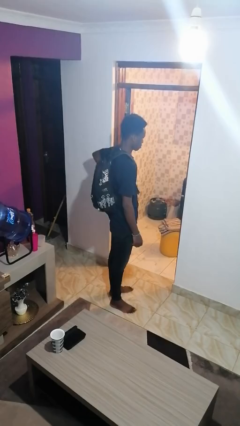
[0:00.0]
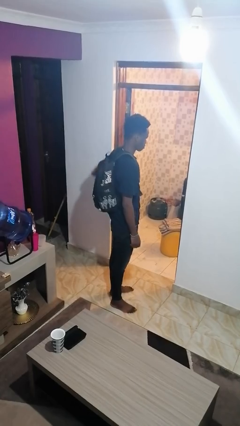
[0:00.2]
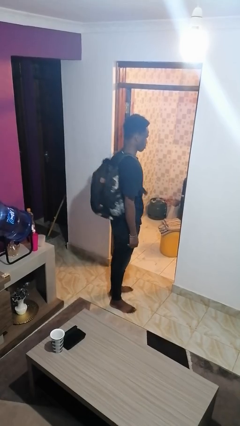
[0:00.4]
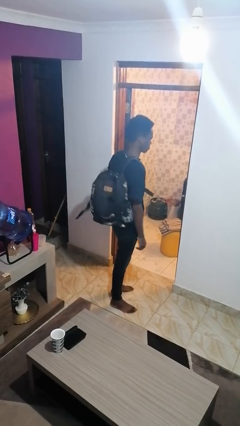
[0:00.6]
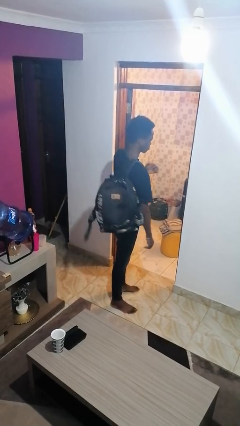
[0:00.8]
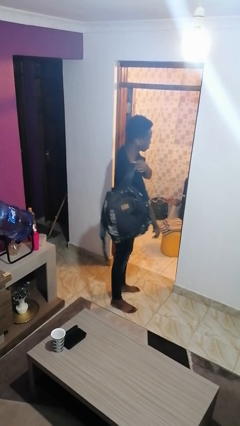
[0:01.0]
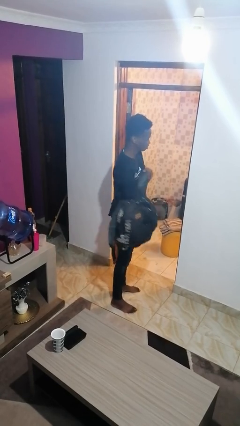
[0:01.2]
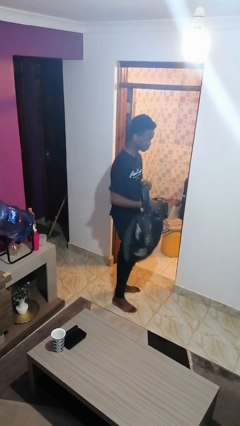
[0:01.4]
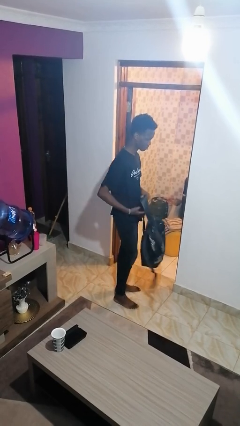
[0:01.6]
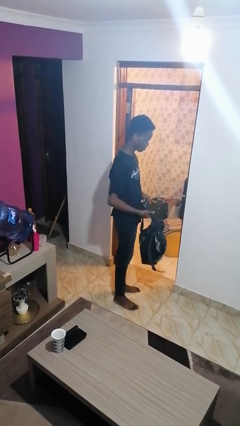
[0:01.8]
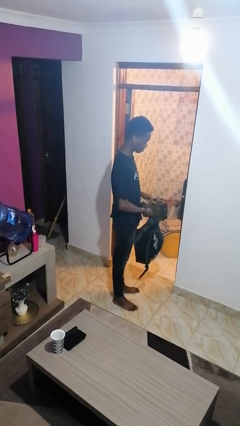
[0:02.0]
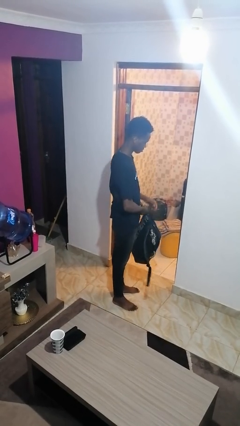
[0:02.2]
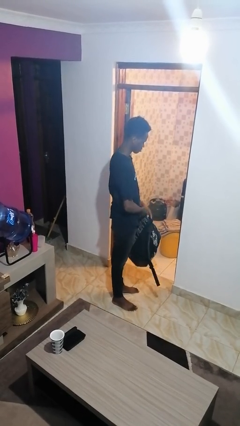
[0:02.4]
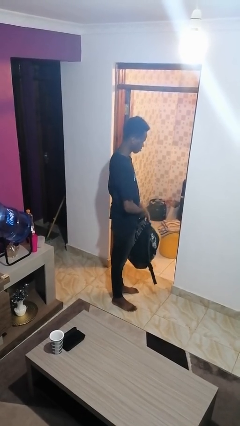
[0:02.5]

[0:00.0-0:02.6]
person takes off backpack

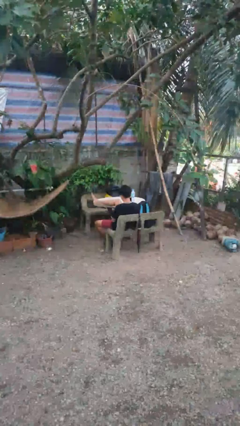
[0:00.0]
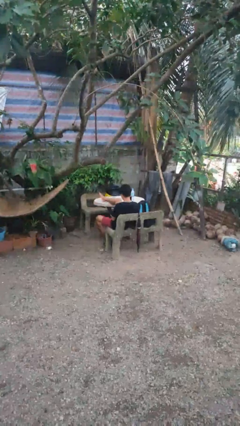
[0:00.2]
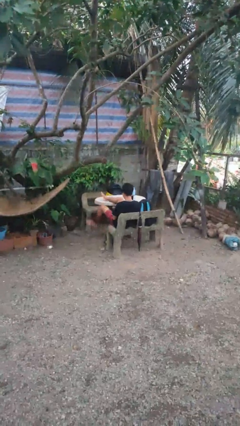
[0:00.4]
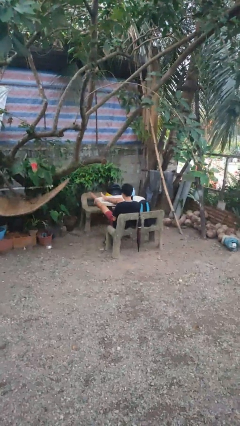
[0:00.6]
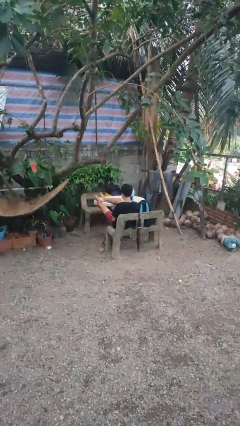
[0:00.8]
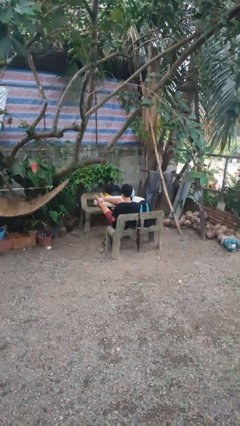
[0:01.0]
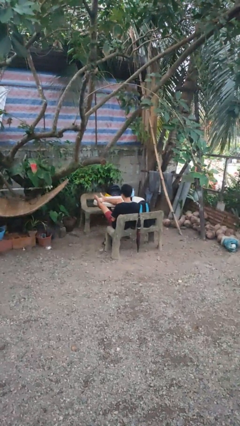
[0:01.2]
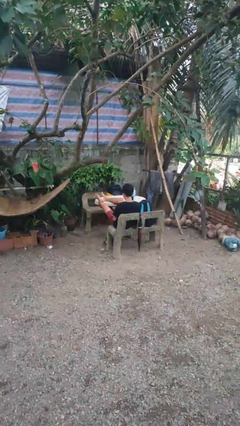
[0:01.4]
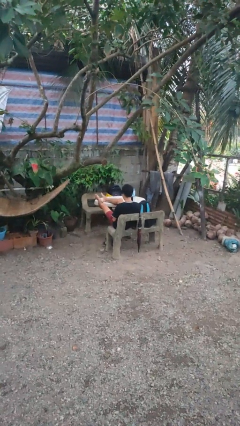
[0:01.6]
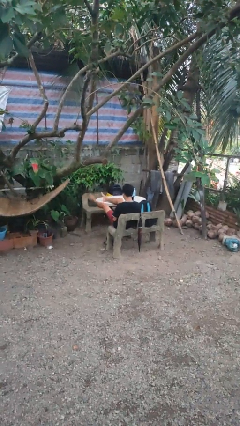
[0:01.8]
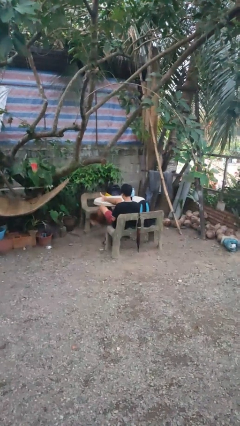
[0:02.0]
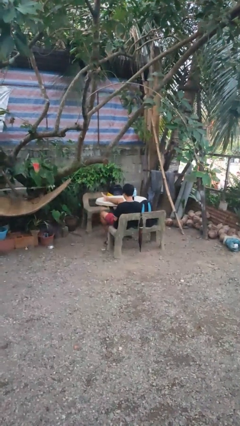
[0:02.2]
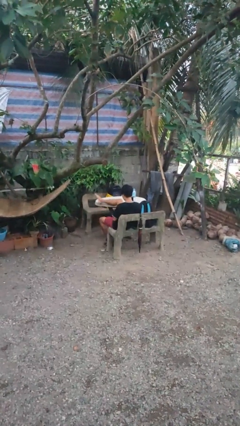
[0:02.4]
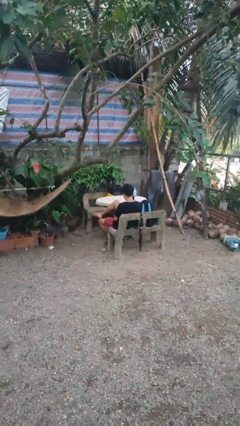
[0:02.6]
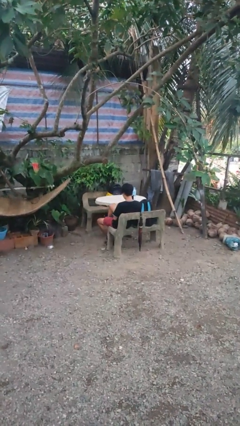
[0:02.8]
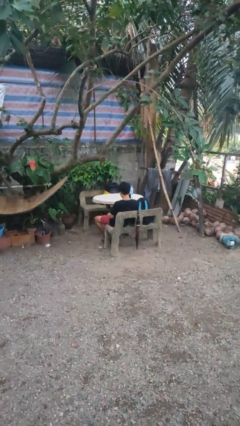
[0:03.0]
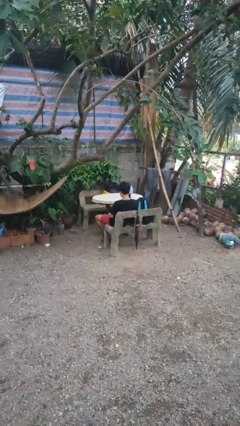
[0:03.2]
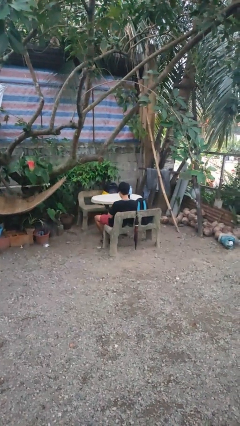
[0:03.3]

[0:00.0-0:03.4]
person puts feet up

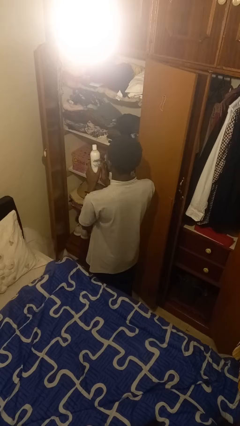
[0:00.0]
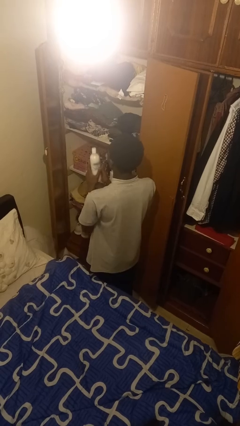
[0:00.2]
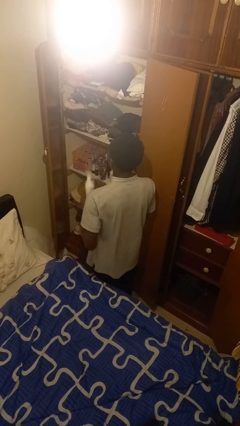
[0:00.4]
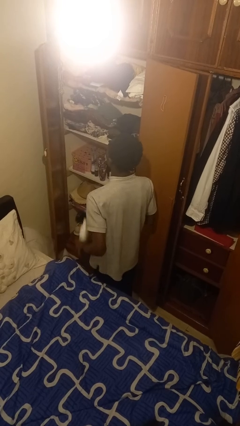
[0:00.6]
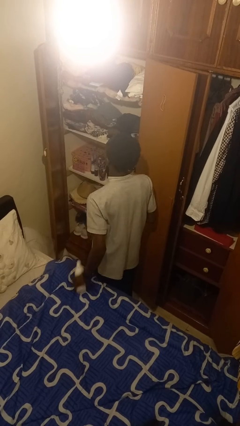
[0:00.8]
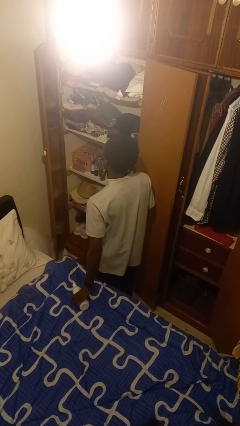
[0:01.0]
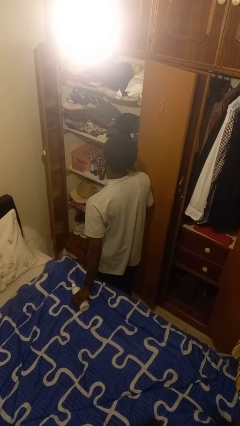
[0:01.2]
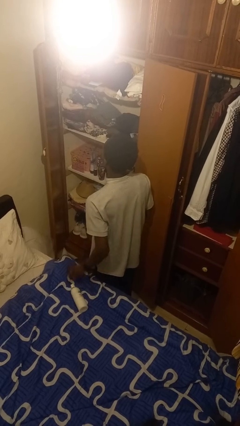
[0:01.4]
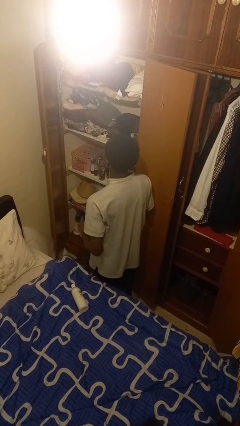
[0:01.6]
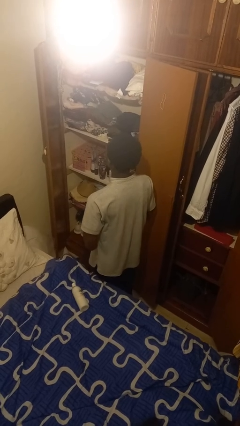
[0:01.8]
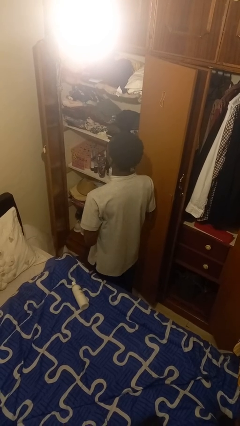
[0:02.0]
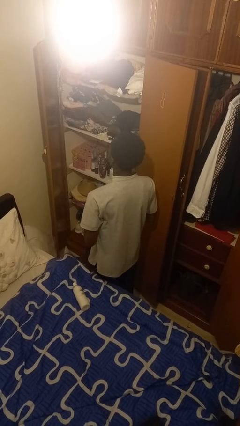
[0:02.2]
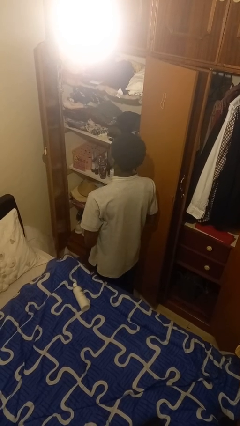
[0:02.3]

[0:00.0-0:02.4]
person puts down object on bed

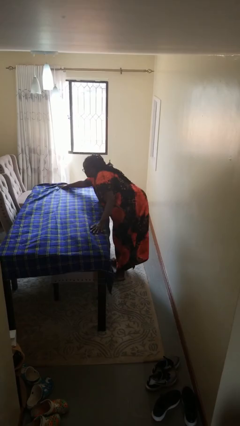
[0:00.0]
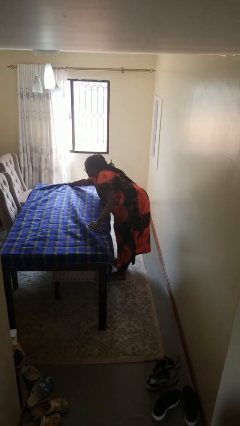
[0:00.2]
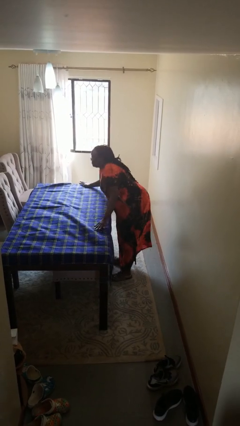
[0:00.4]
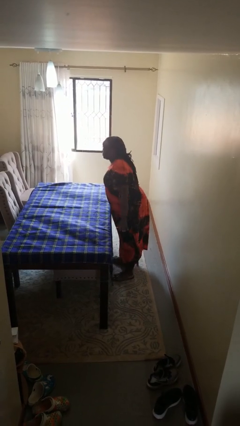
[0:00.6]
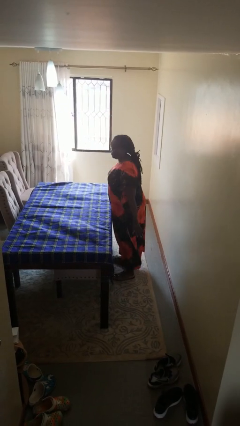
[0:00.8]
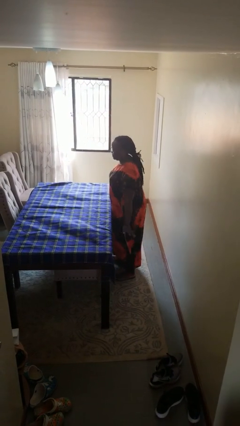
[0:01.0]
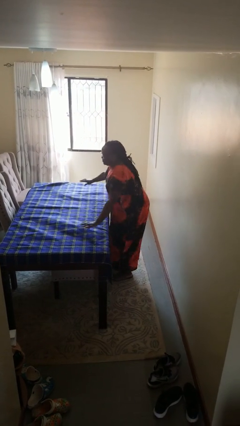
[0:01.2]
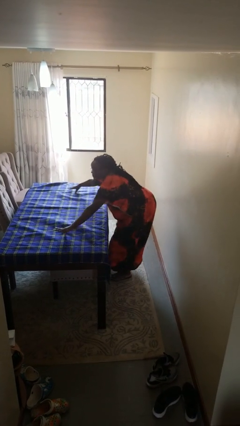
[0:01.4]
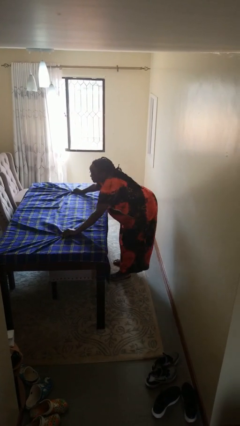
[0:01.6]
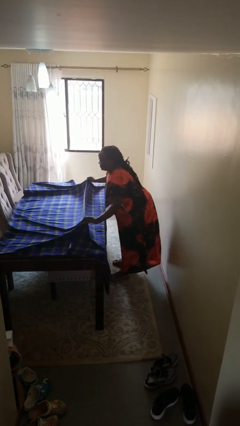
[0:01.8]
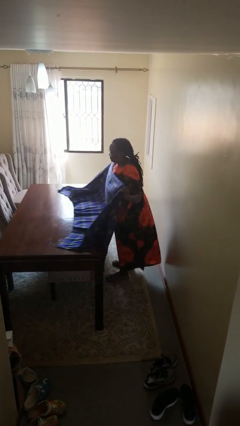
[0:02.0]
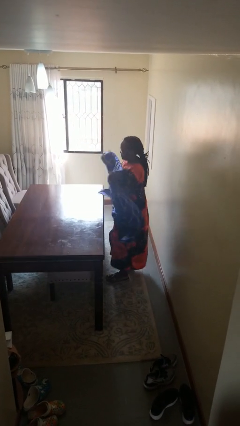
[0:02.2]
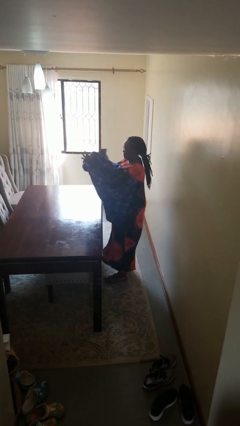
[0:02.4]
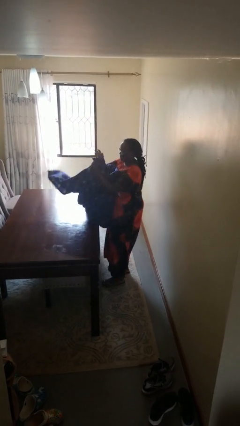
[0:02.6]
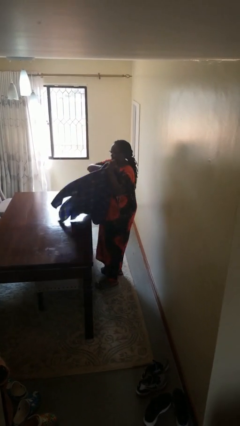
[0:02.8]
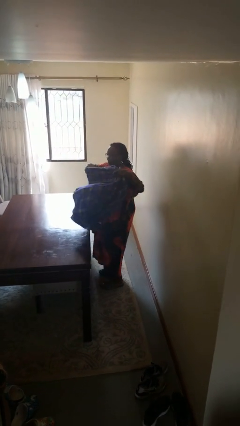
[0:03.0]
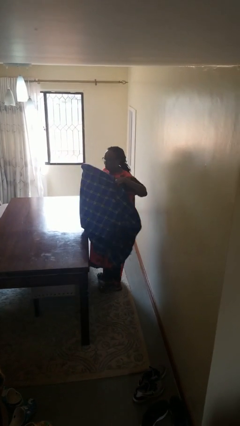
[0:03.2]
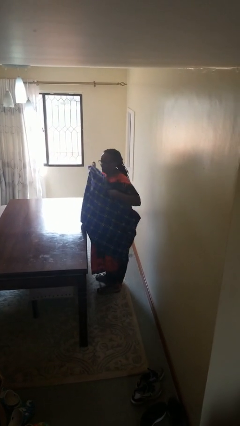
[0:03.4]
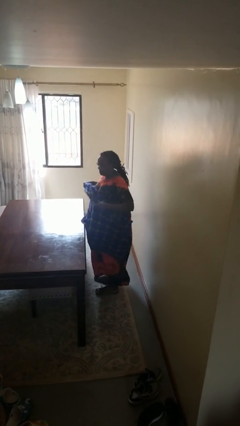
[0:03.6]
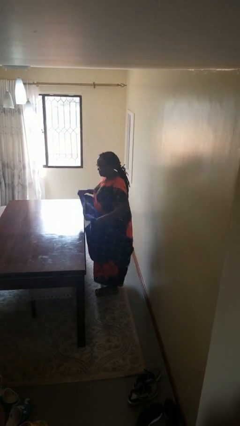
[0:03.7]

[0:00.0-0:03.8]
person folds tablecloth

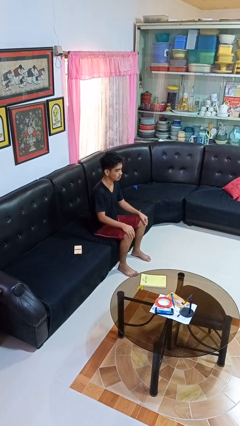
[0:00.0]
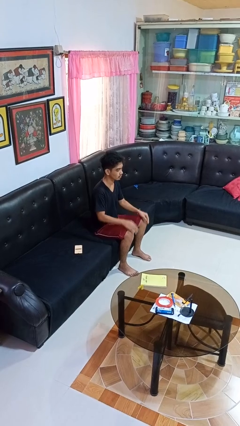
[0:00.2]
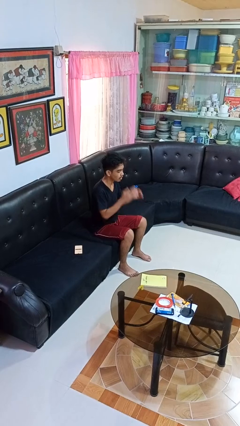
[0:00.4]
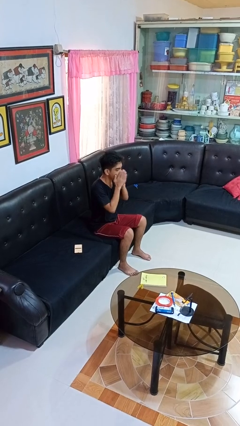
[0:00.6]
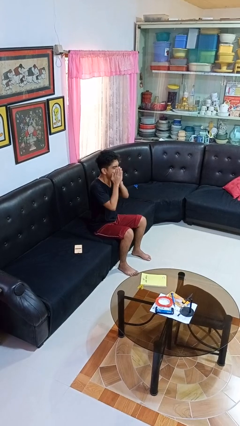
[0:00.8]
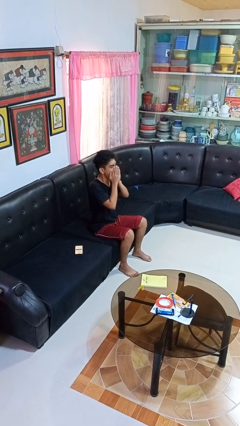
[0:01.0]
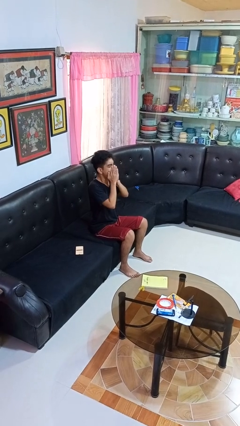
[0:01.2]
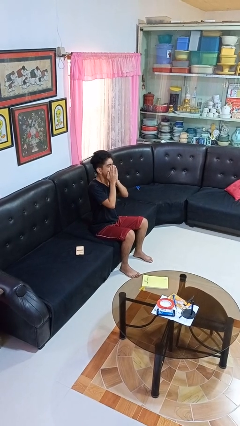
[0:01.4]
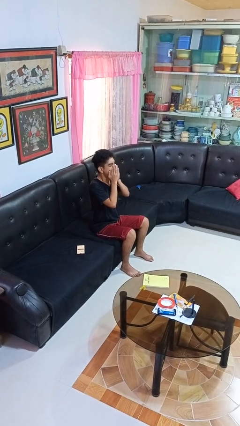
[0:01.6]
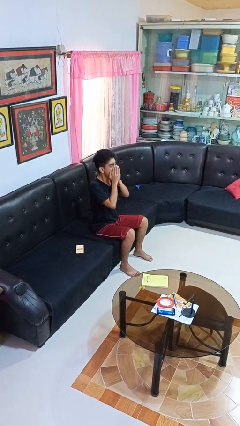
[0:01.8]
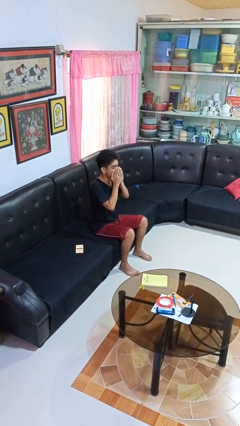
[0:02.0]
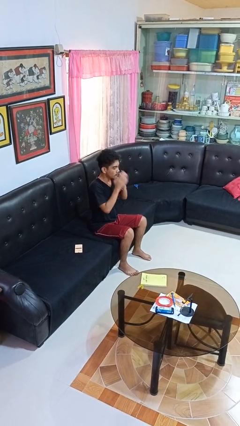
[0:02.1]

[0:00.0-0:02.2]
person yawns

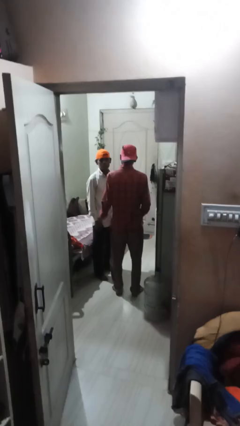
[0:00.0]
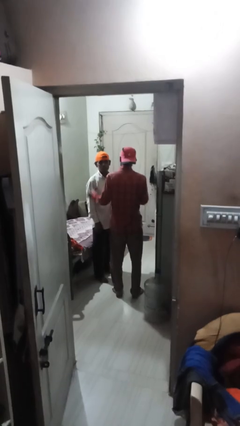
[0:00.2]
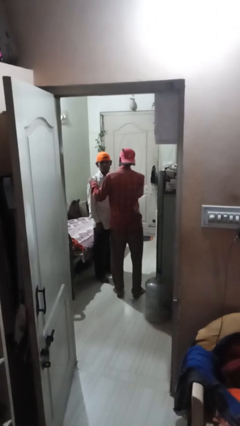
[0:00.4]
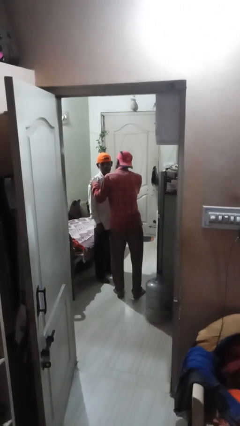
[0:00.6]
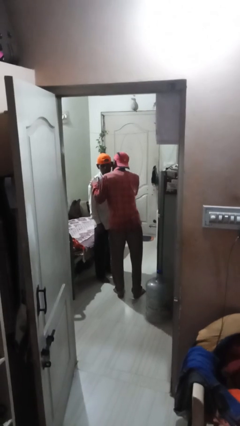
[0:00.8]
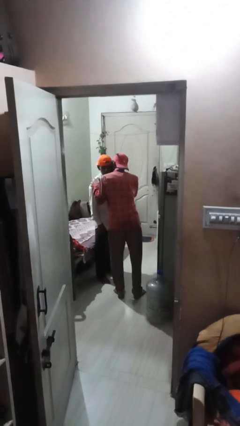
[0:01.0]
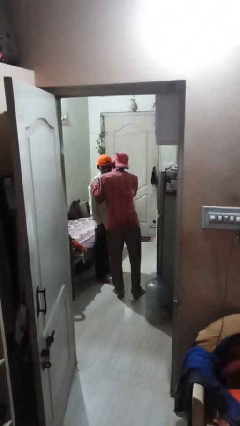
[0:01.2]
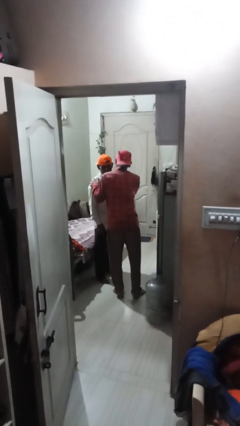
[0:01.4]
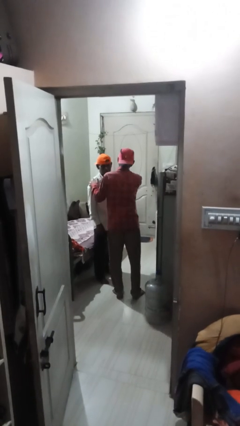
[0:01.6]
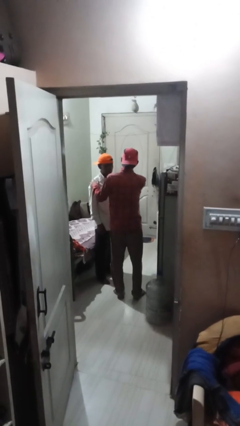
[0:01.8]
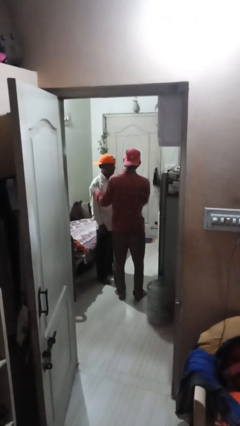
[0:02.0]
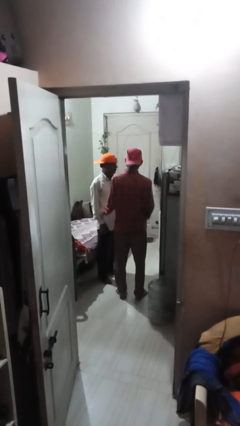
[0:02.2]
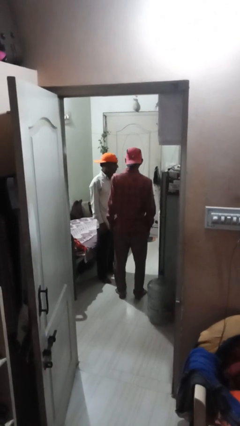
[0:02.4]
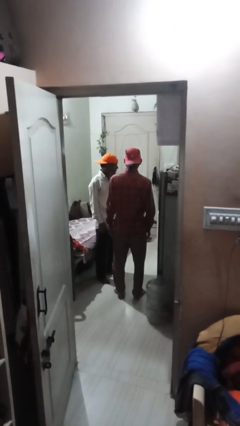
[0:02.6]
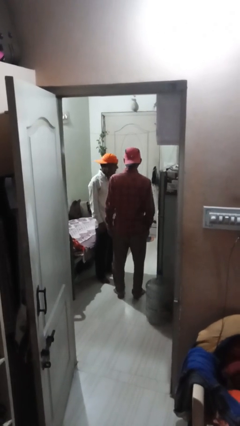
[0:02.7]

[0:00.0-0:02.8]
person kisses cheek of person

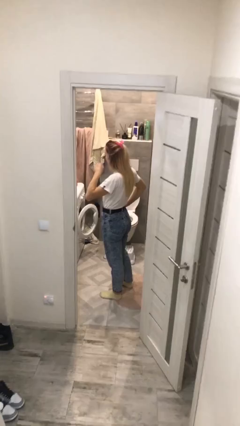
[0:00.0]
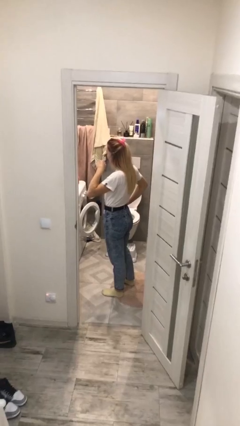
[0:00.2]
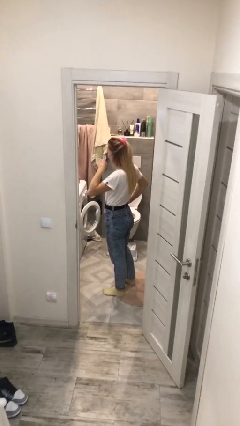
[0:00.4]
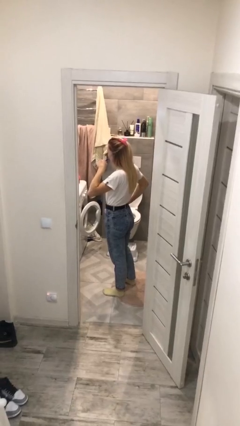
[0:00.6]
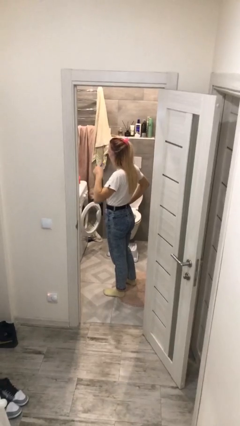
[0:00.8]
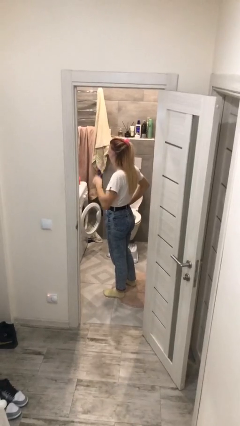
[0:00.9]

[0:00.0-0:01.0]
person brushes teeth
